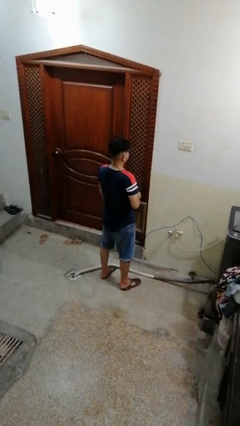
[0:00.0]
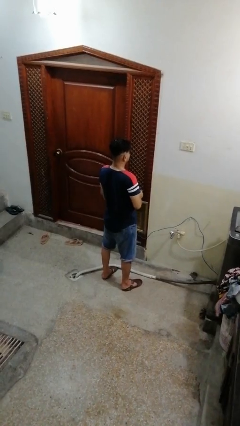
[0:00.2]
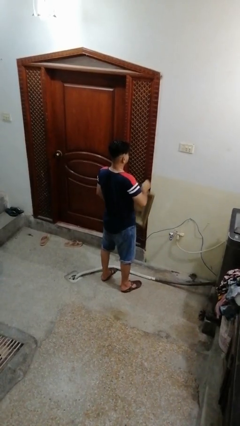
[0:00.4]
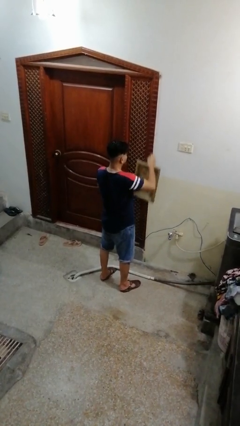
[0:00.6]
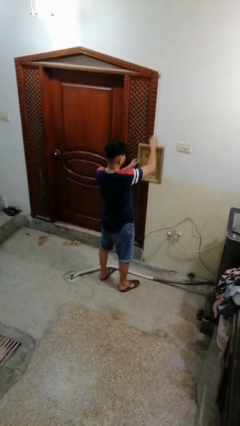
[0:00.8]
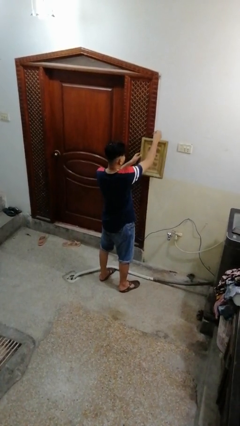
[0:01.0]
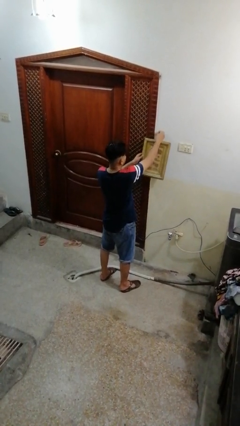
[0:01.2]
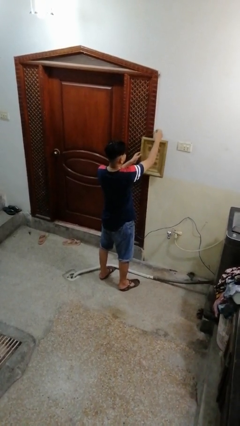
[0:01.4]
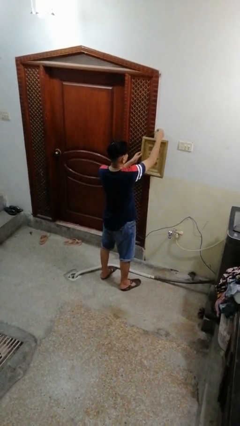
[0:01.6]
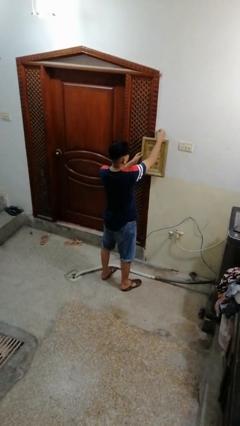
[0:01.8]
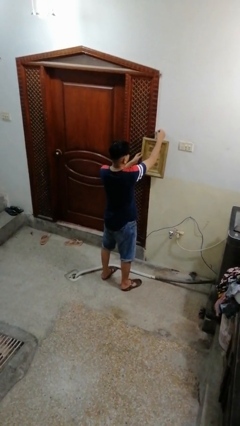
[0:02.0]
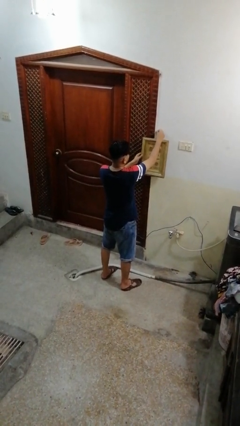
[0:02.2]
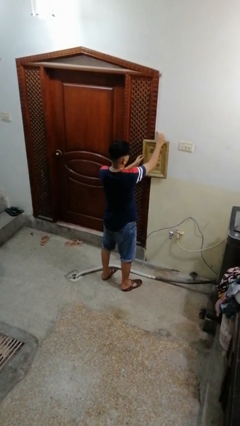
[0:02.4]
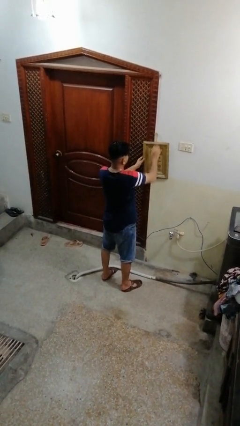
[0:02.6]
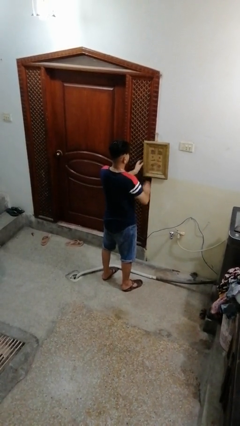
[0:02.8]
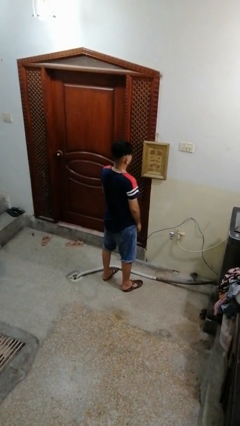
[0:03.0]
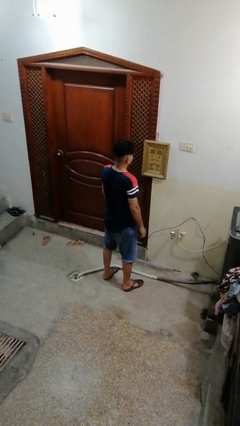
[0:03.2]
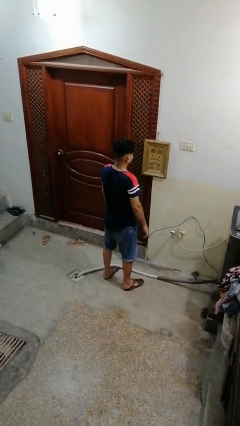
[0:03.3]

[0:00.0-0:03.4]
person puts up picture frame

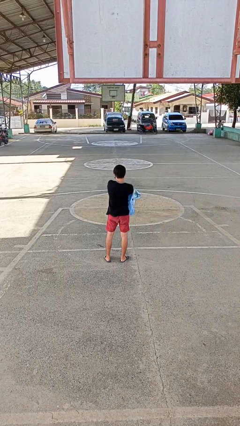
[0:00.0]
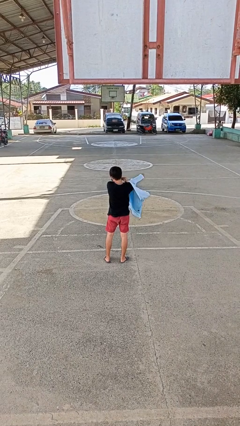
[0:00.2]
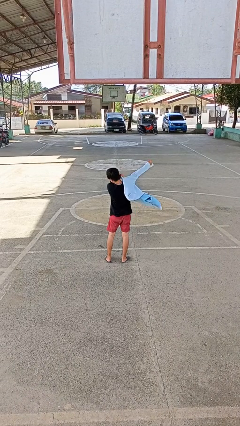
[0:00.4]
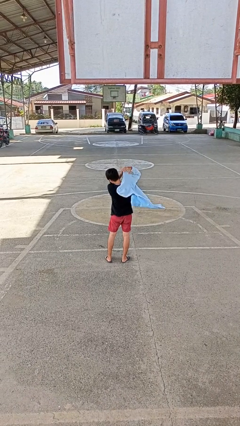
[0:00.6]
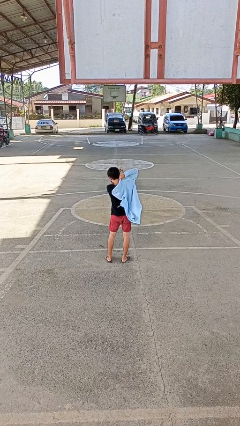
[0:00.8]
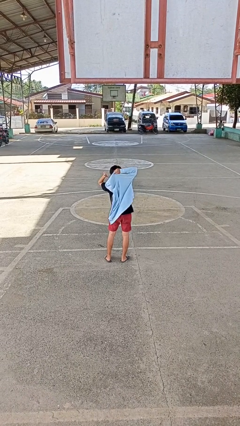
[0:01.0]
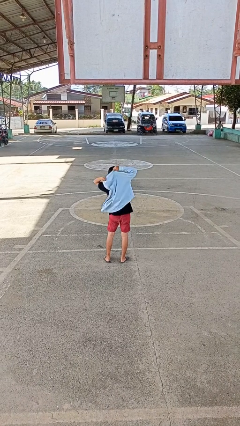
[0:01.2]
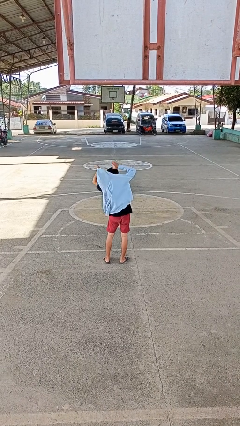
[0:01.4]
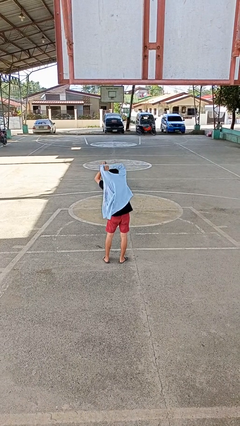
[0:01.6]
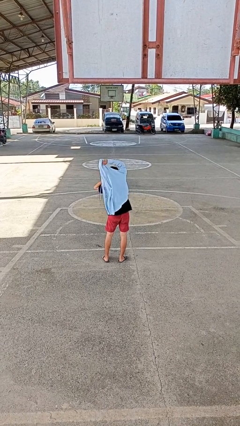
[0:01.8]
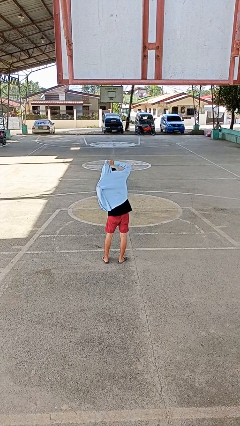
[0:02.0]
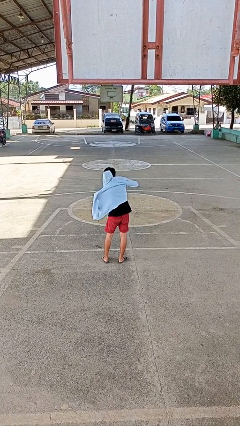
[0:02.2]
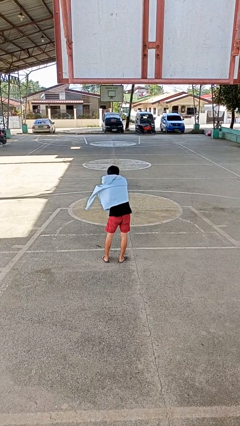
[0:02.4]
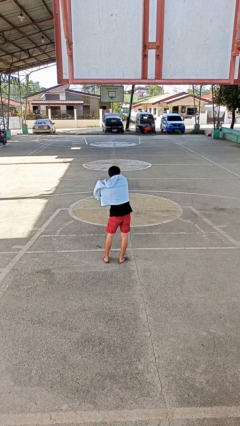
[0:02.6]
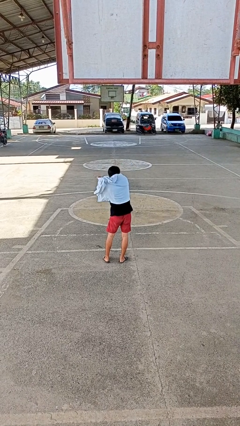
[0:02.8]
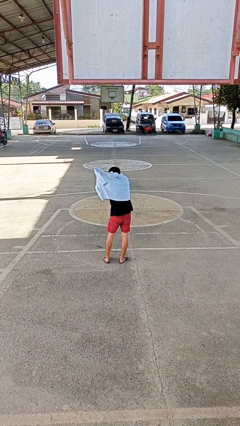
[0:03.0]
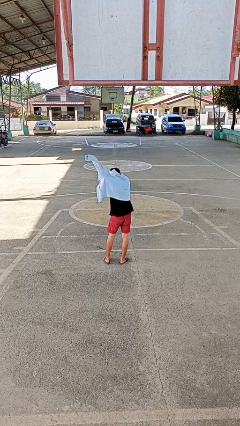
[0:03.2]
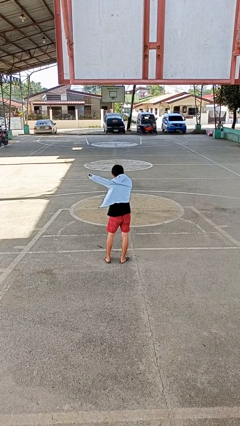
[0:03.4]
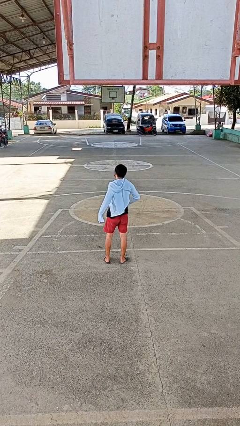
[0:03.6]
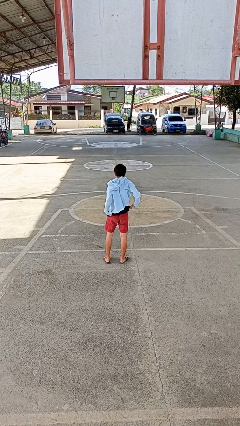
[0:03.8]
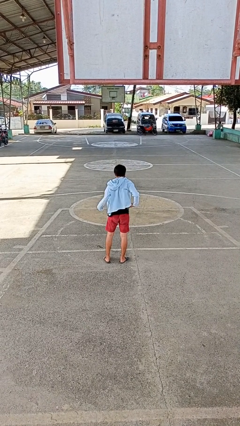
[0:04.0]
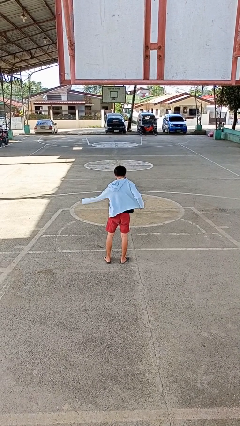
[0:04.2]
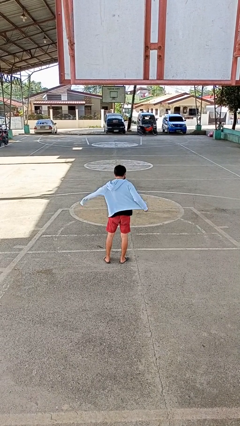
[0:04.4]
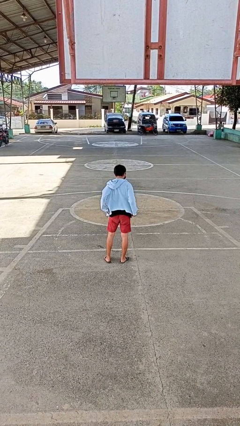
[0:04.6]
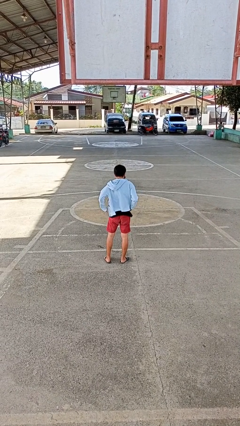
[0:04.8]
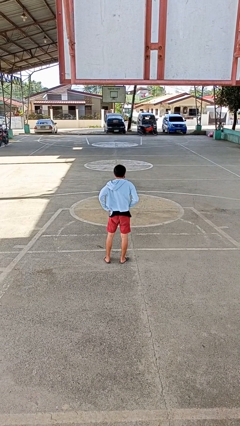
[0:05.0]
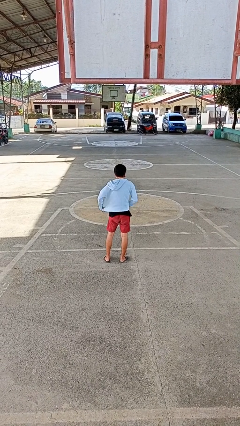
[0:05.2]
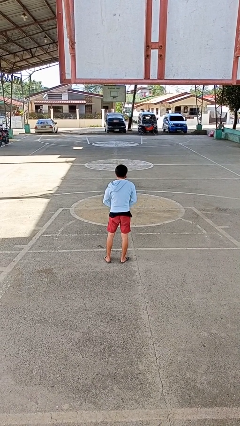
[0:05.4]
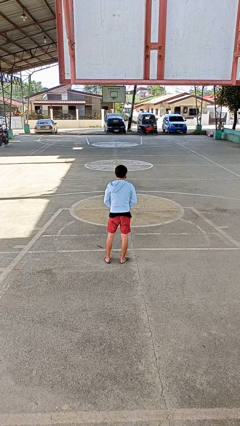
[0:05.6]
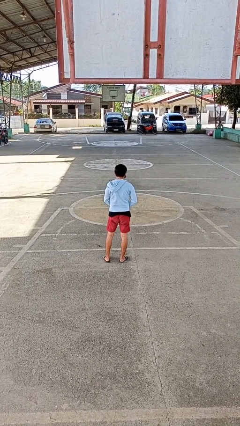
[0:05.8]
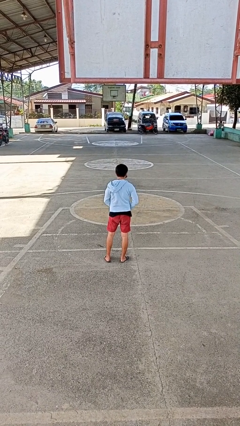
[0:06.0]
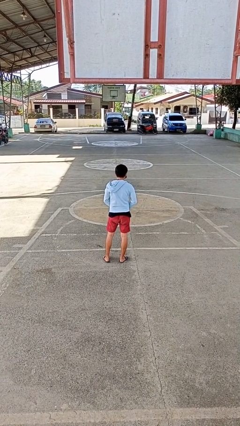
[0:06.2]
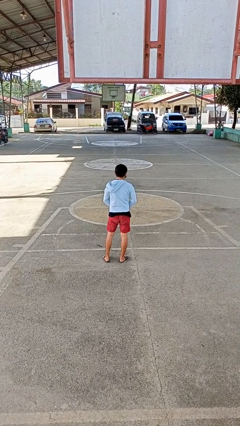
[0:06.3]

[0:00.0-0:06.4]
person puts on jacket

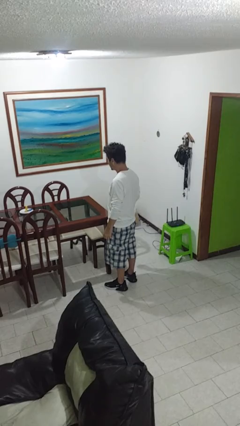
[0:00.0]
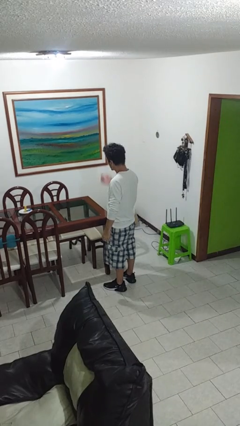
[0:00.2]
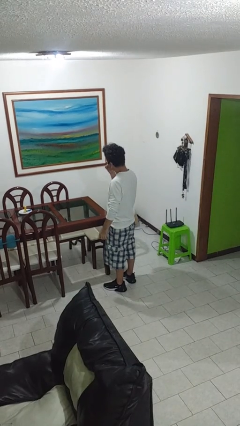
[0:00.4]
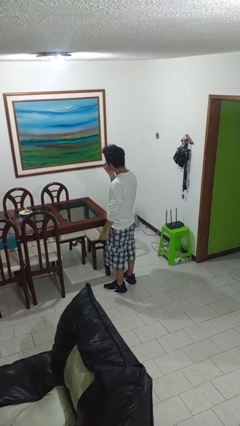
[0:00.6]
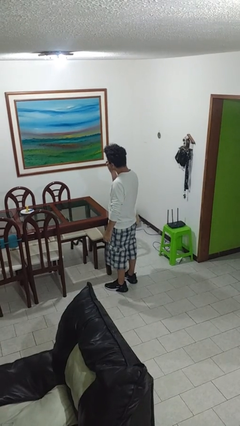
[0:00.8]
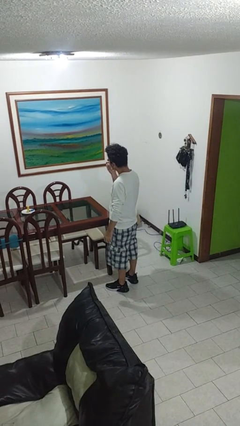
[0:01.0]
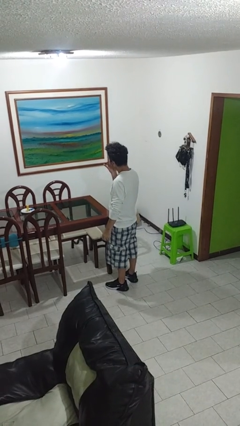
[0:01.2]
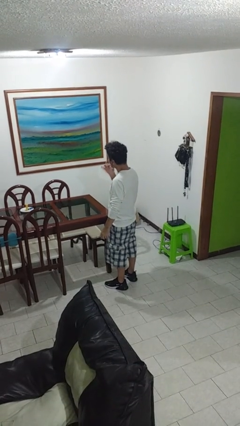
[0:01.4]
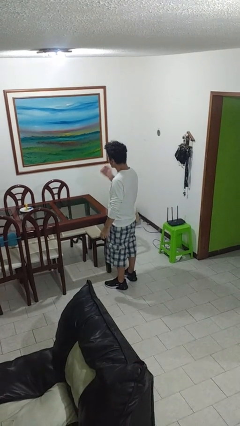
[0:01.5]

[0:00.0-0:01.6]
person licks fingers

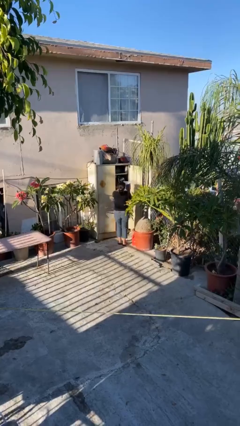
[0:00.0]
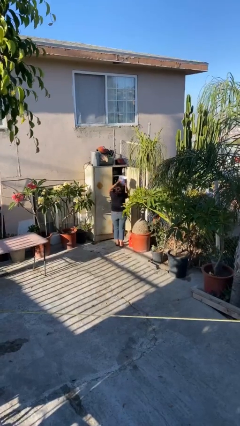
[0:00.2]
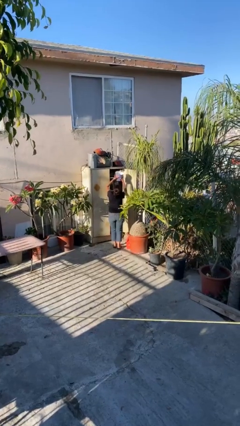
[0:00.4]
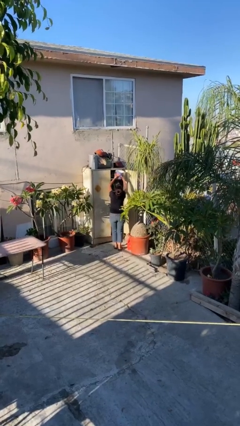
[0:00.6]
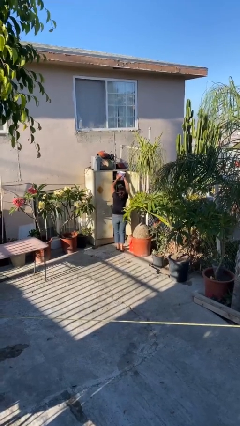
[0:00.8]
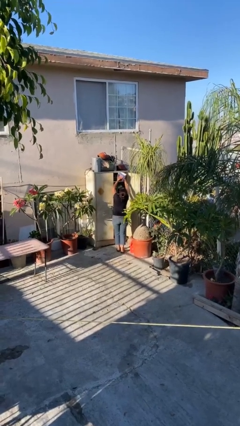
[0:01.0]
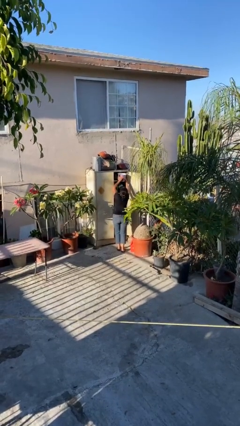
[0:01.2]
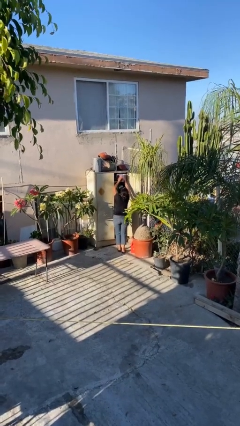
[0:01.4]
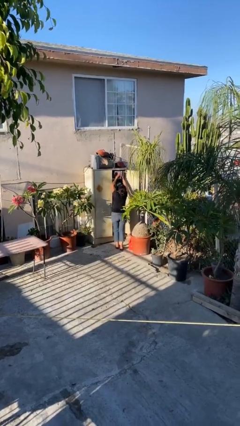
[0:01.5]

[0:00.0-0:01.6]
person puts down object on shelf

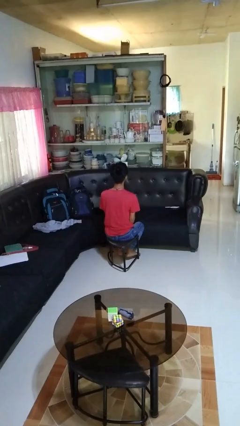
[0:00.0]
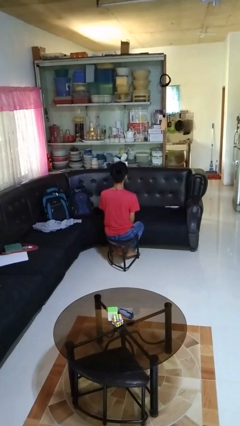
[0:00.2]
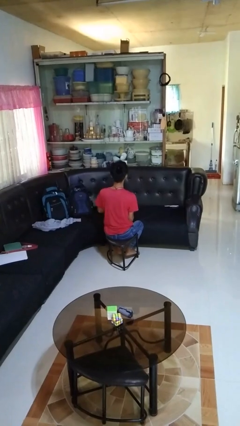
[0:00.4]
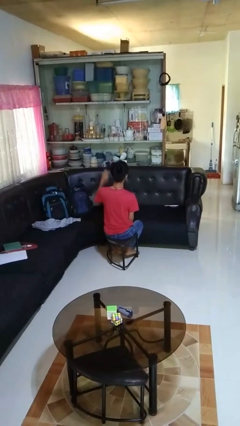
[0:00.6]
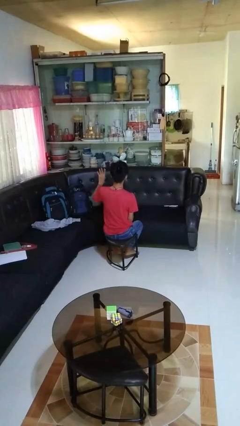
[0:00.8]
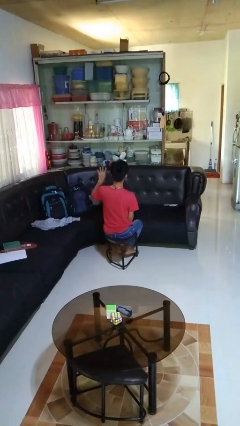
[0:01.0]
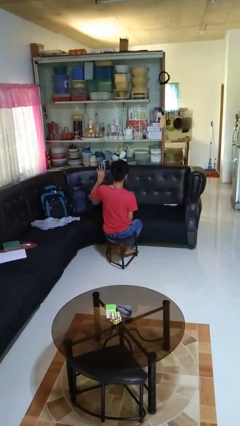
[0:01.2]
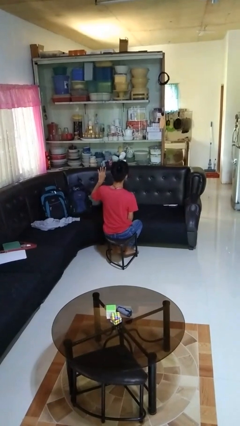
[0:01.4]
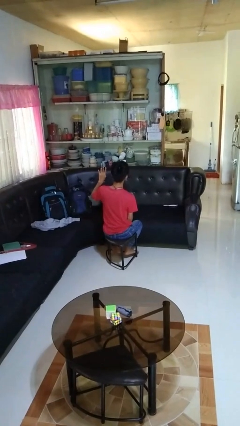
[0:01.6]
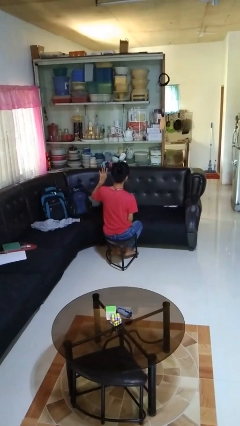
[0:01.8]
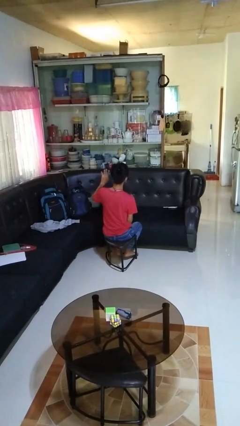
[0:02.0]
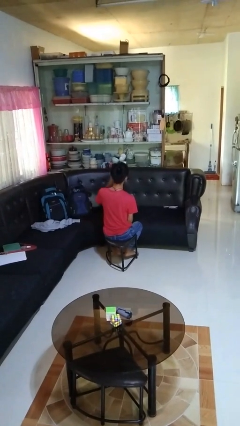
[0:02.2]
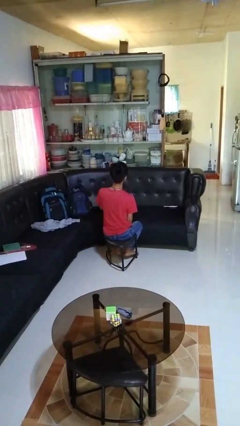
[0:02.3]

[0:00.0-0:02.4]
person gestures number four

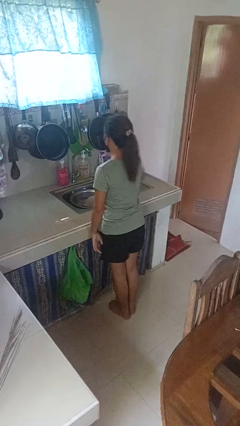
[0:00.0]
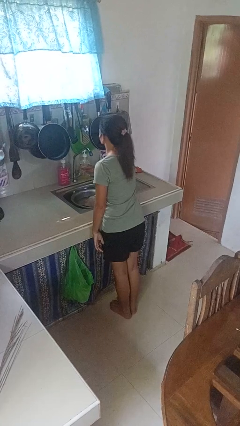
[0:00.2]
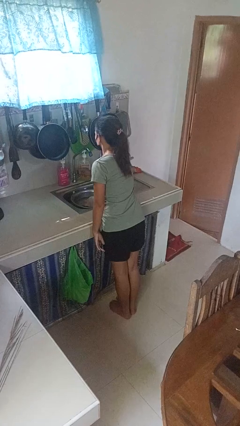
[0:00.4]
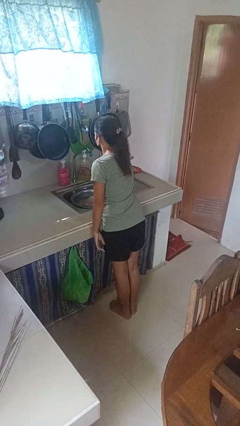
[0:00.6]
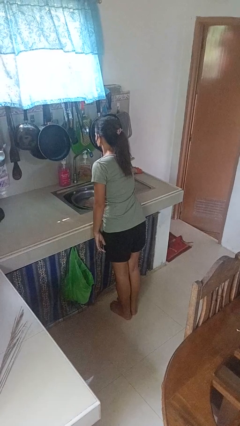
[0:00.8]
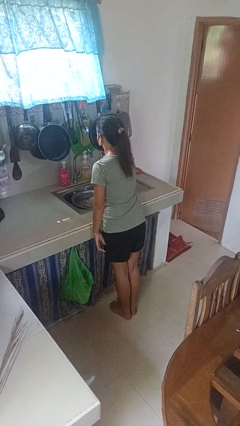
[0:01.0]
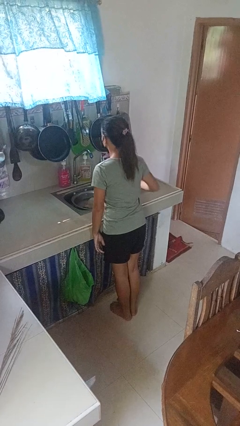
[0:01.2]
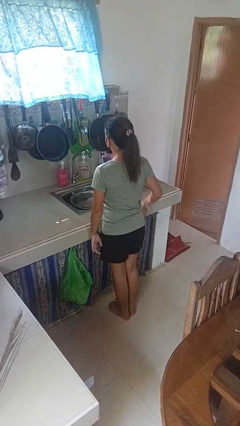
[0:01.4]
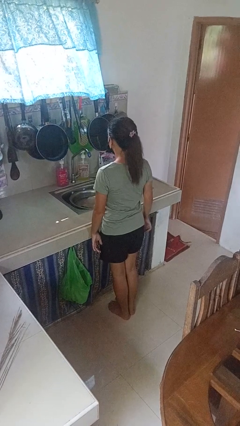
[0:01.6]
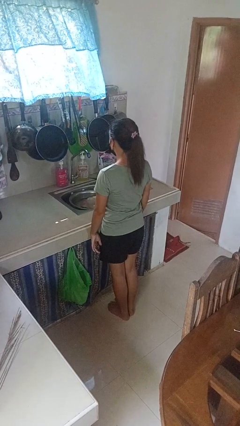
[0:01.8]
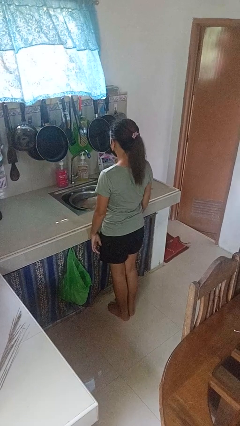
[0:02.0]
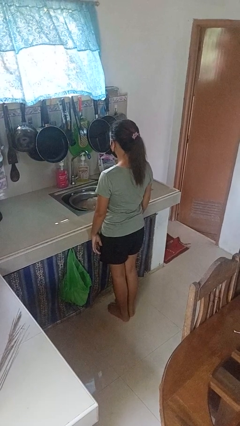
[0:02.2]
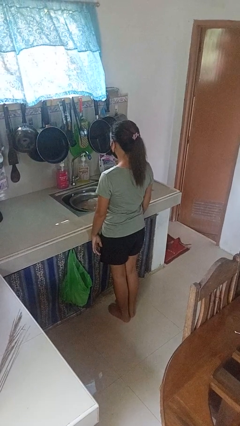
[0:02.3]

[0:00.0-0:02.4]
person turns on faucet
